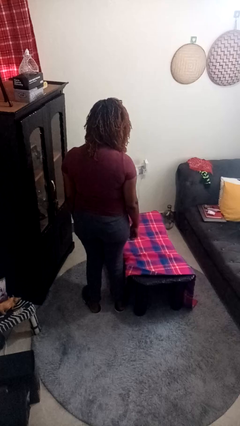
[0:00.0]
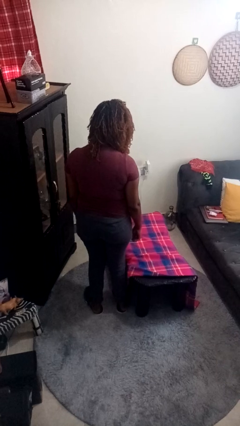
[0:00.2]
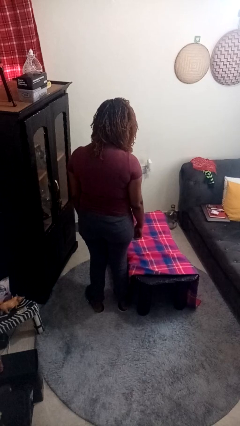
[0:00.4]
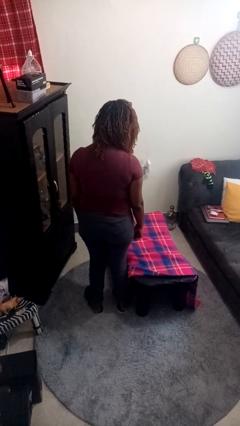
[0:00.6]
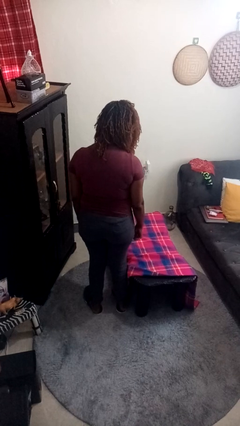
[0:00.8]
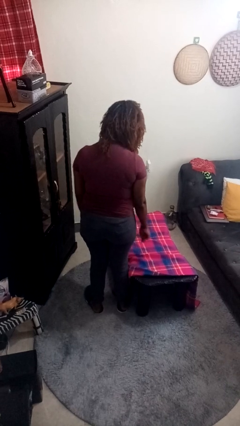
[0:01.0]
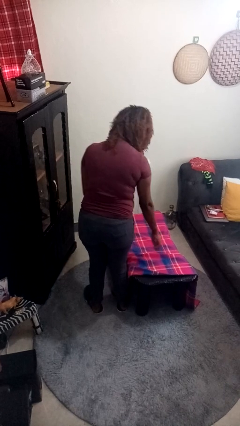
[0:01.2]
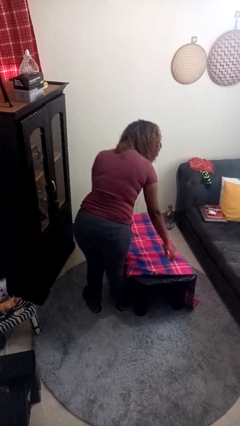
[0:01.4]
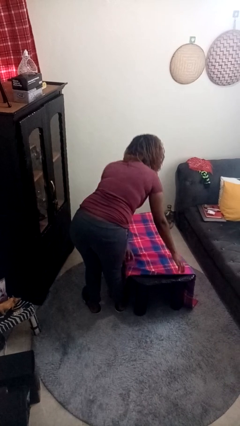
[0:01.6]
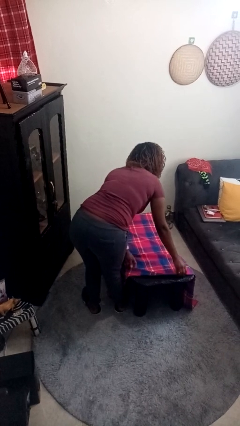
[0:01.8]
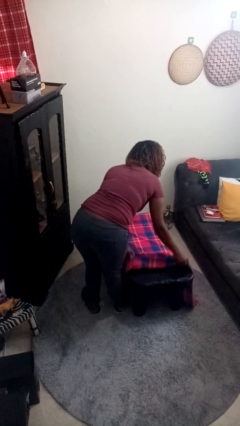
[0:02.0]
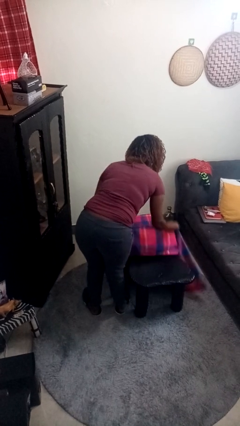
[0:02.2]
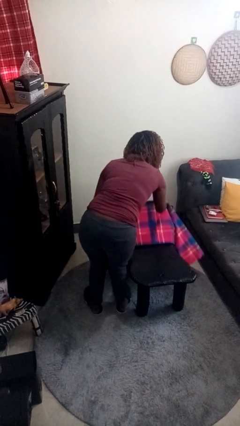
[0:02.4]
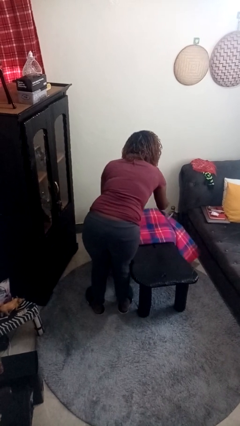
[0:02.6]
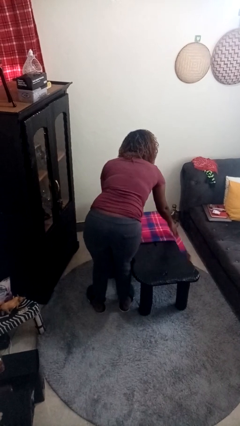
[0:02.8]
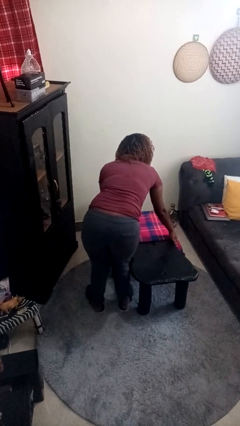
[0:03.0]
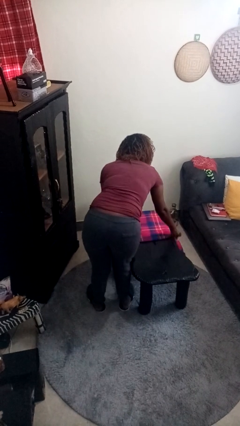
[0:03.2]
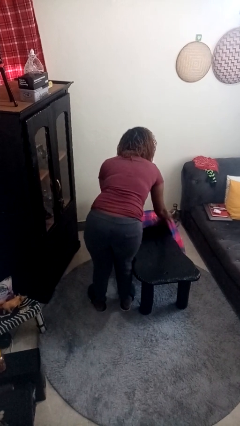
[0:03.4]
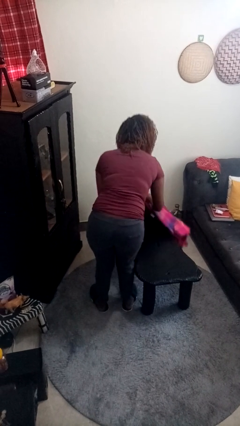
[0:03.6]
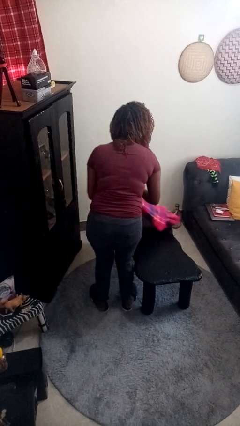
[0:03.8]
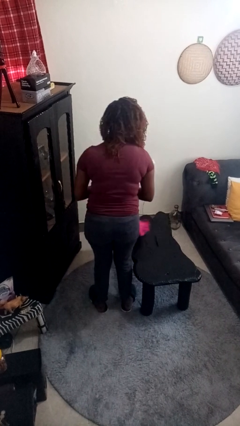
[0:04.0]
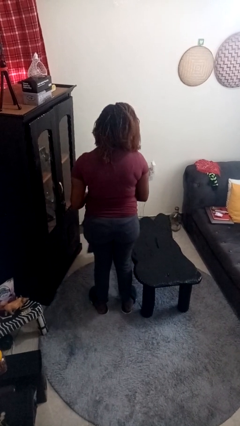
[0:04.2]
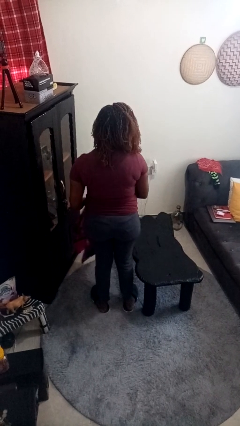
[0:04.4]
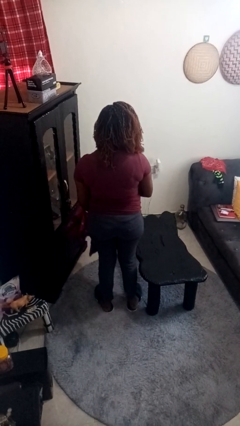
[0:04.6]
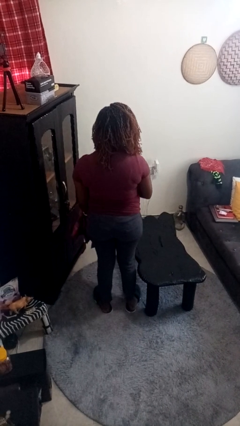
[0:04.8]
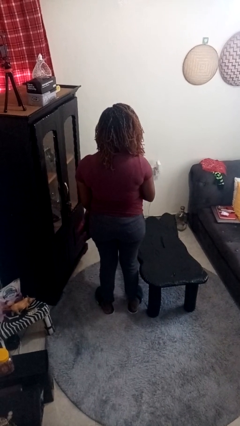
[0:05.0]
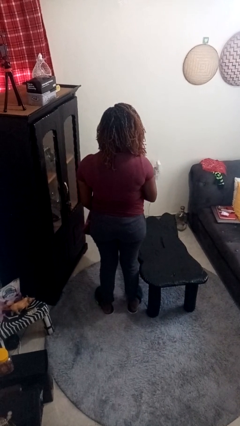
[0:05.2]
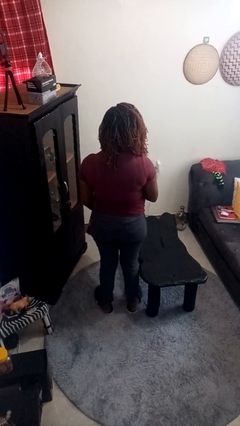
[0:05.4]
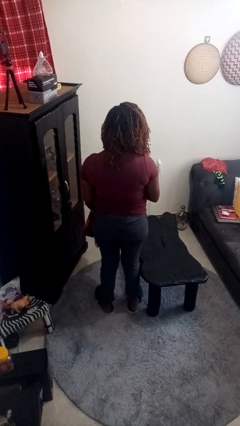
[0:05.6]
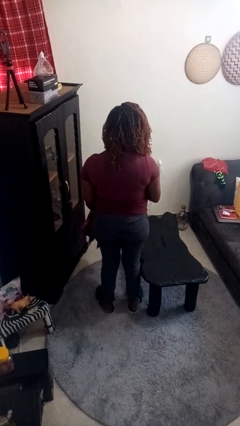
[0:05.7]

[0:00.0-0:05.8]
person folds tablecloth

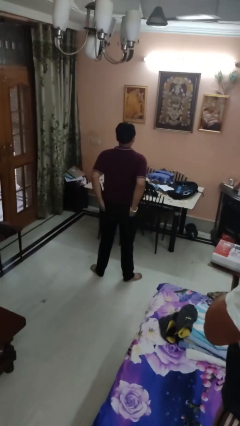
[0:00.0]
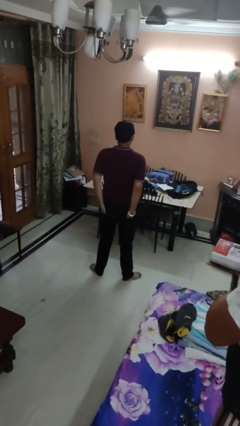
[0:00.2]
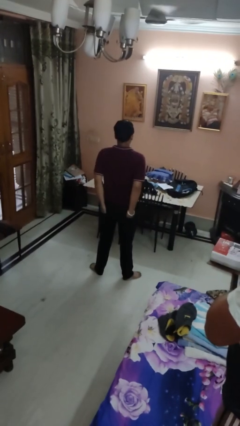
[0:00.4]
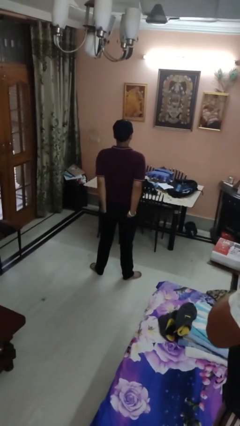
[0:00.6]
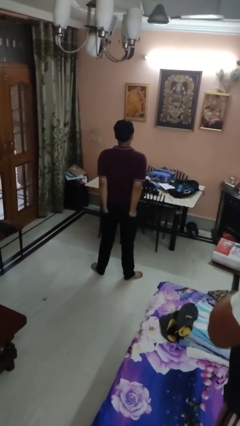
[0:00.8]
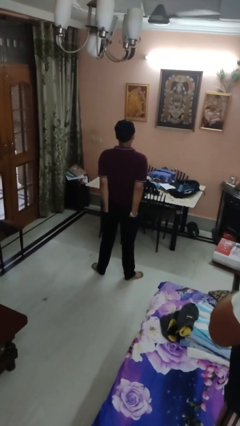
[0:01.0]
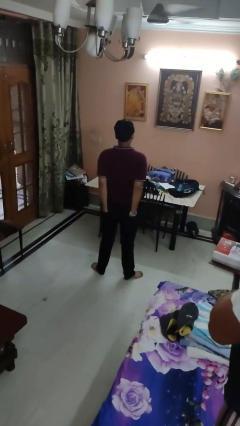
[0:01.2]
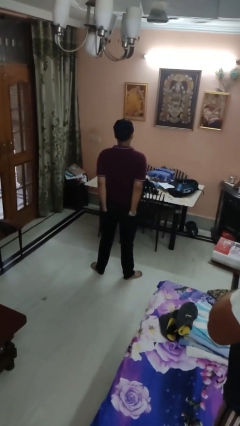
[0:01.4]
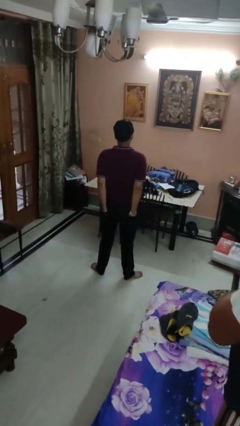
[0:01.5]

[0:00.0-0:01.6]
person puts hands in back pockets

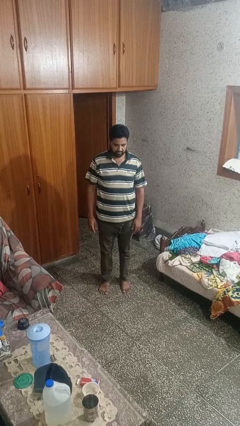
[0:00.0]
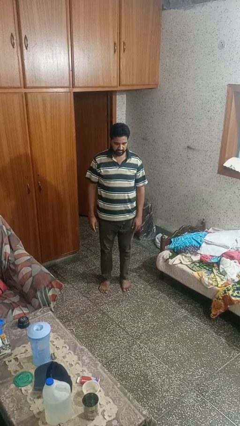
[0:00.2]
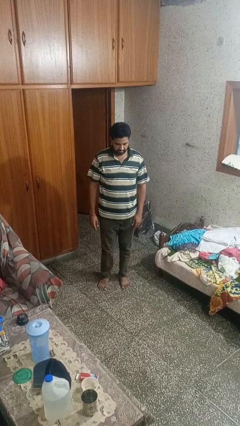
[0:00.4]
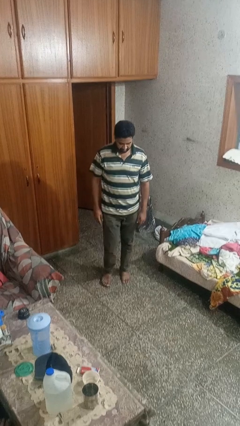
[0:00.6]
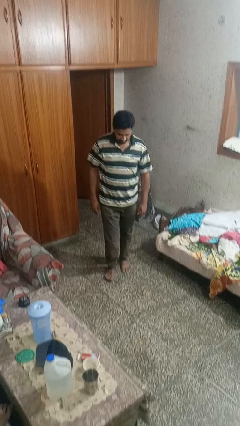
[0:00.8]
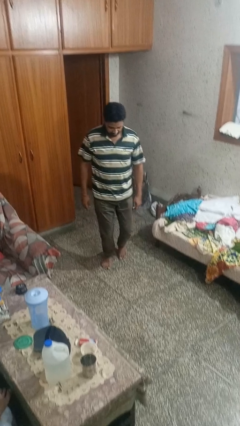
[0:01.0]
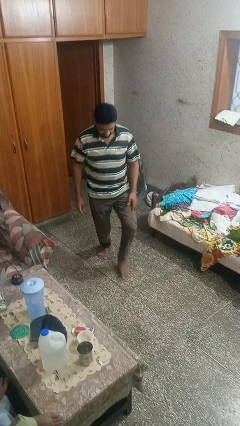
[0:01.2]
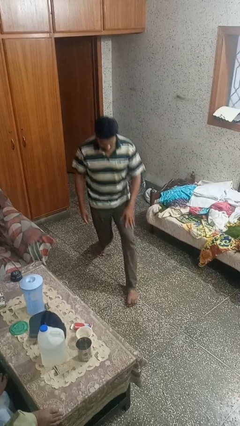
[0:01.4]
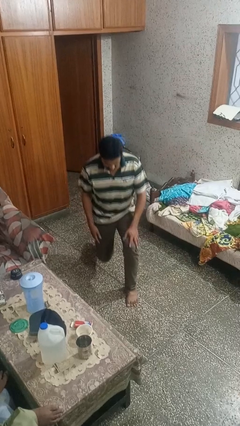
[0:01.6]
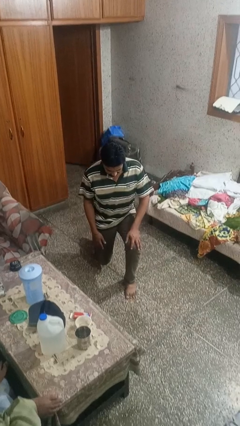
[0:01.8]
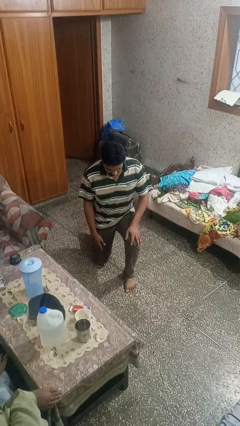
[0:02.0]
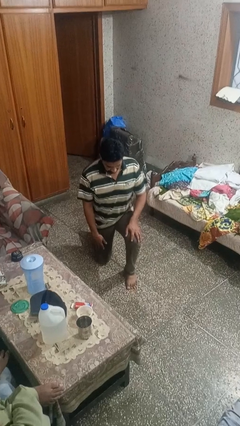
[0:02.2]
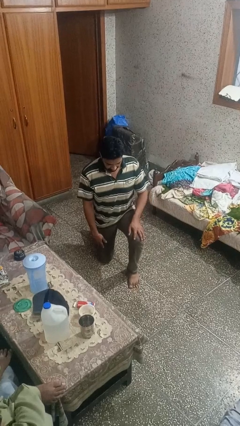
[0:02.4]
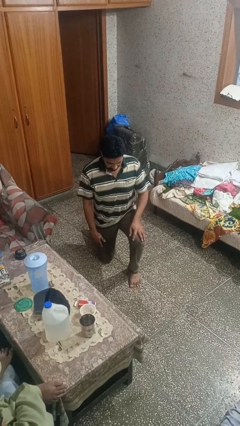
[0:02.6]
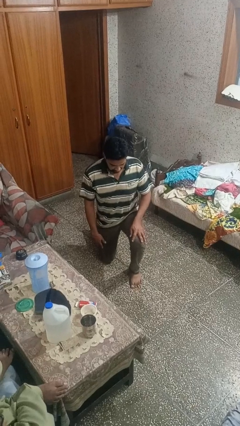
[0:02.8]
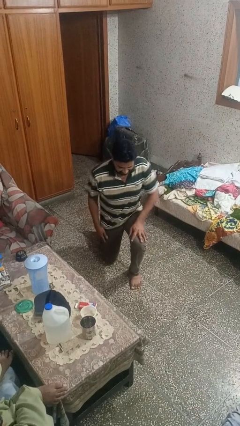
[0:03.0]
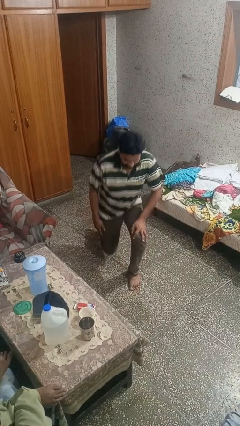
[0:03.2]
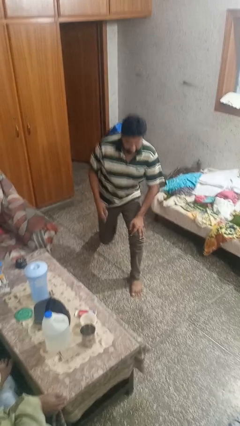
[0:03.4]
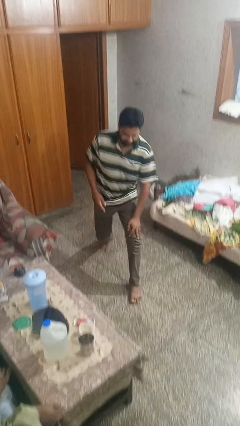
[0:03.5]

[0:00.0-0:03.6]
person exercises with lunges

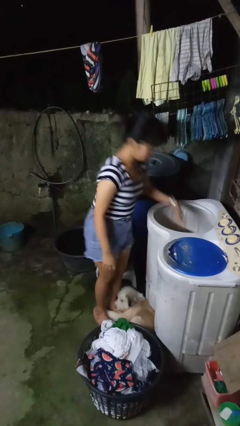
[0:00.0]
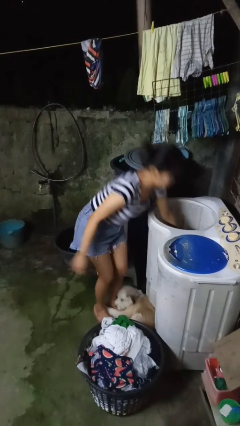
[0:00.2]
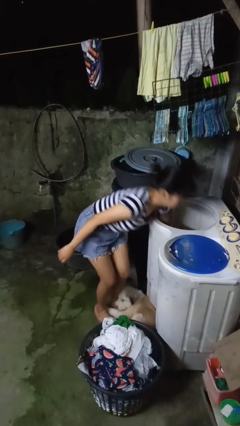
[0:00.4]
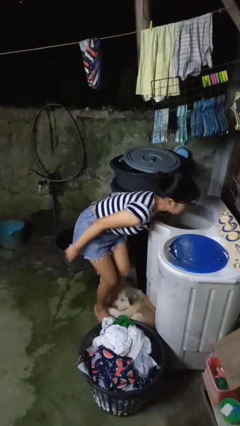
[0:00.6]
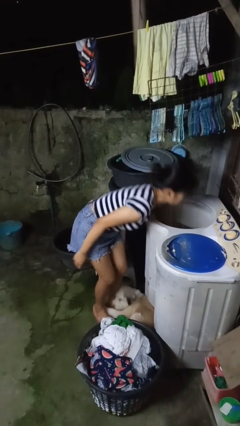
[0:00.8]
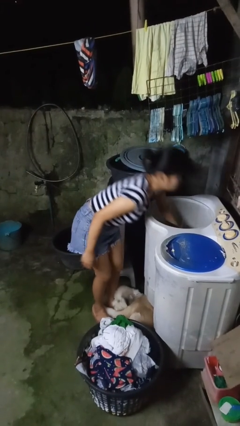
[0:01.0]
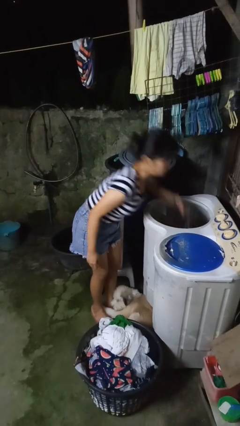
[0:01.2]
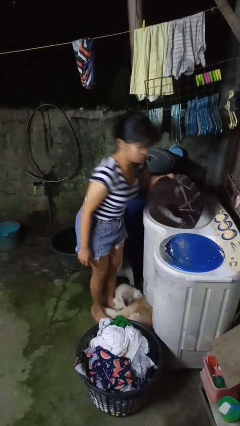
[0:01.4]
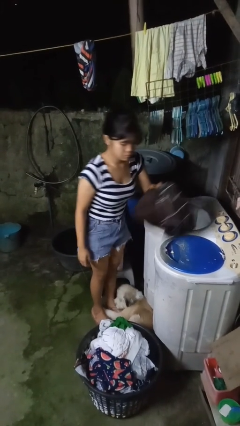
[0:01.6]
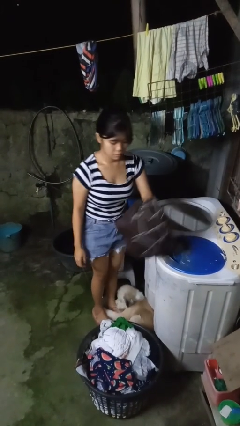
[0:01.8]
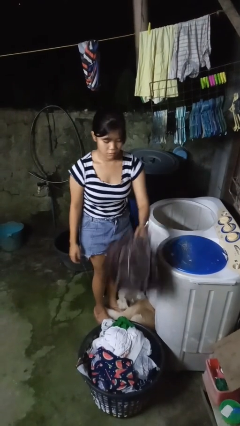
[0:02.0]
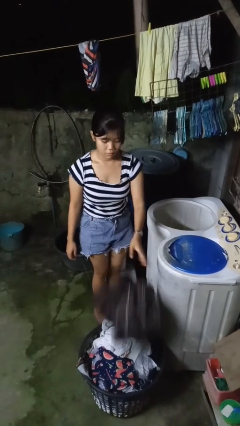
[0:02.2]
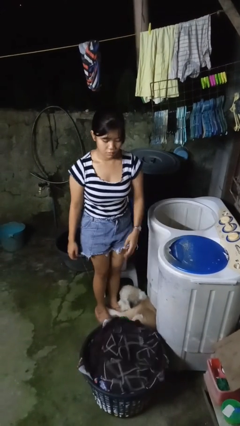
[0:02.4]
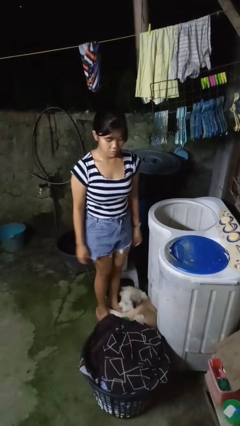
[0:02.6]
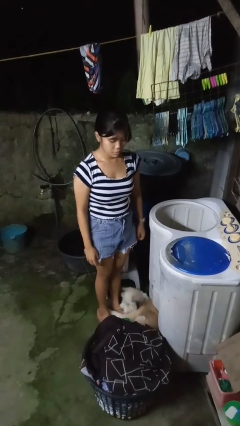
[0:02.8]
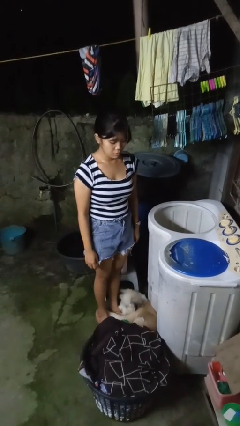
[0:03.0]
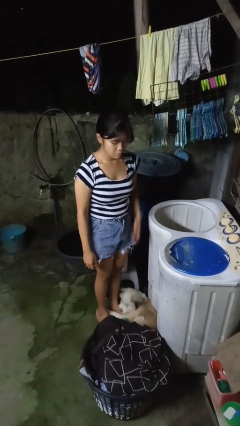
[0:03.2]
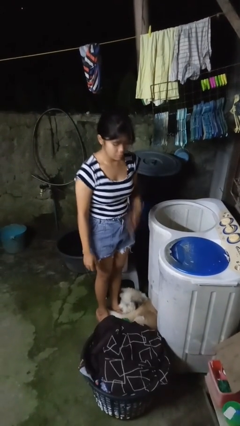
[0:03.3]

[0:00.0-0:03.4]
person unloads clotheswasher

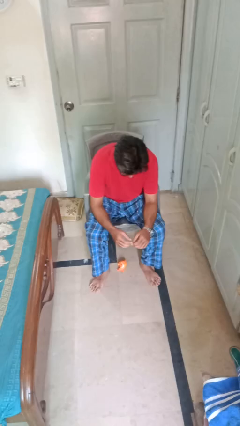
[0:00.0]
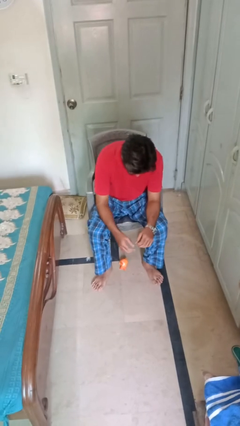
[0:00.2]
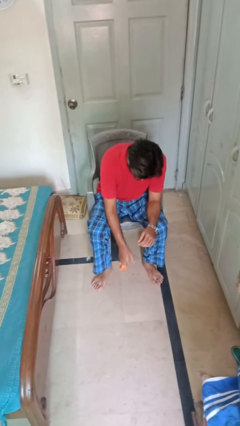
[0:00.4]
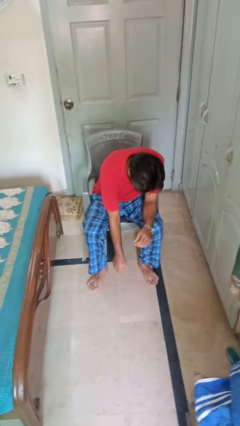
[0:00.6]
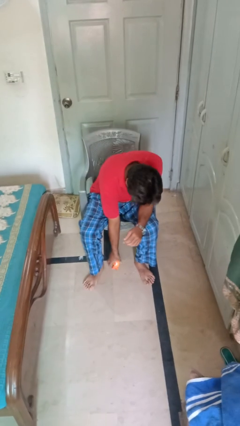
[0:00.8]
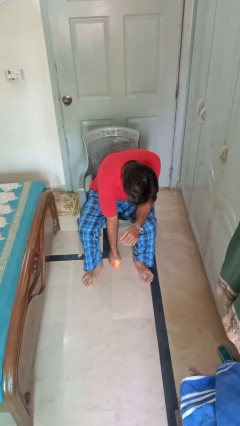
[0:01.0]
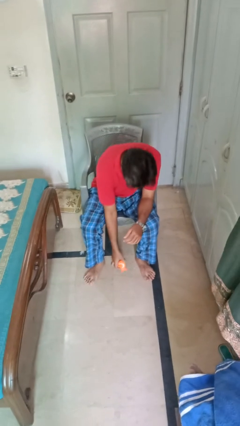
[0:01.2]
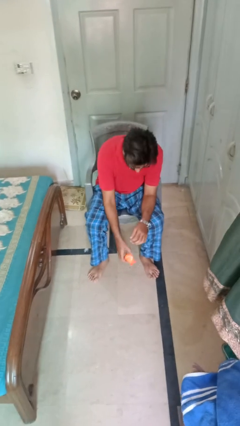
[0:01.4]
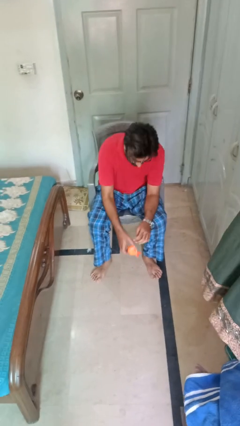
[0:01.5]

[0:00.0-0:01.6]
person picks up object from floor

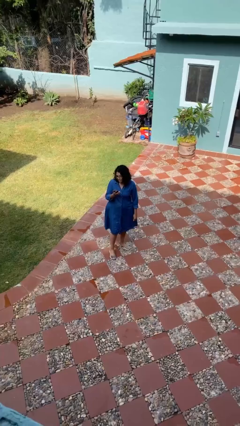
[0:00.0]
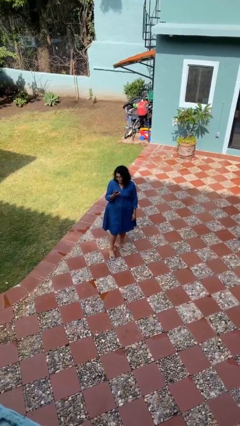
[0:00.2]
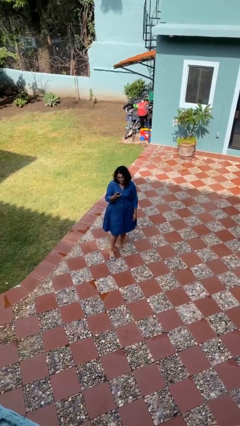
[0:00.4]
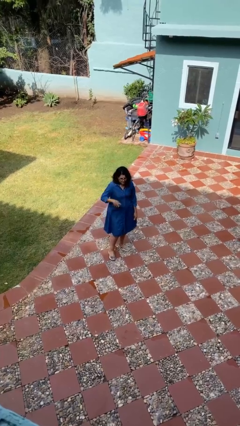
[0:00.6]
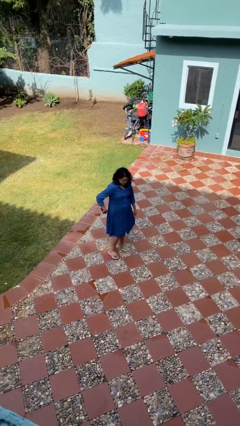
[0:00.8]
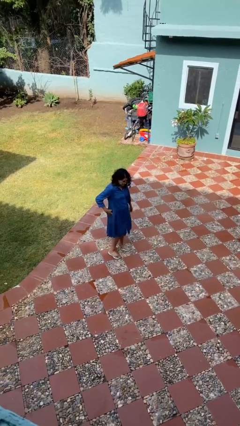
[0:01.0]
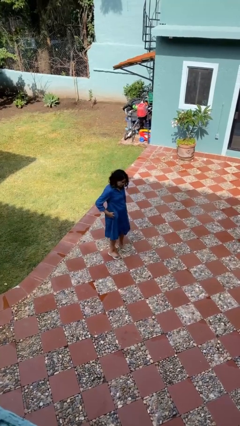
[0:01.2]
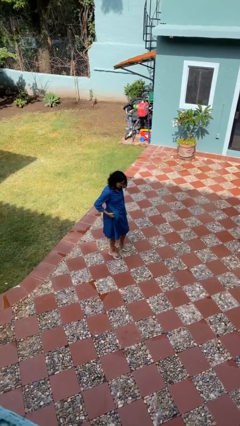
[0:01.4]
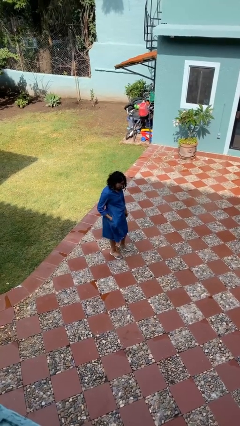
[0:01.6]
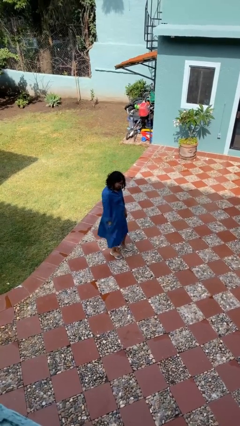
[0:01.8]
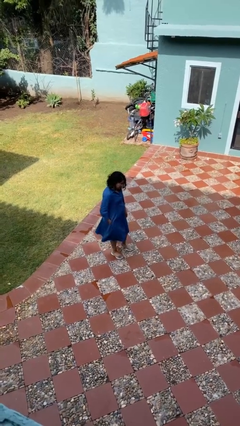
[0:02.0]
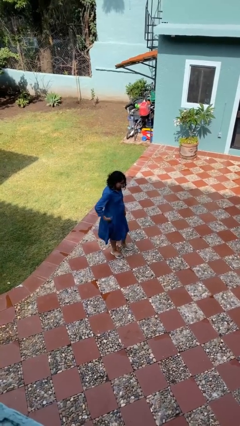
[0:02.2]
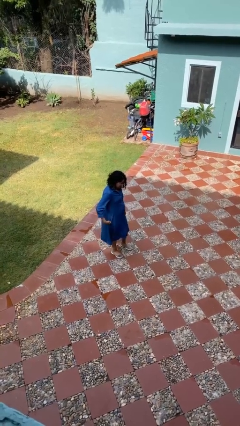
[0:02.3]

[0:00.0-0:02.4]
person puts phone into pocket
